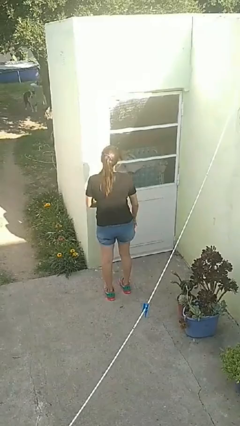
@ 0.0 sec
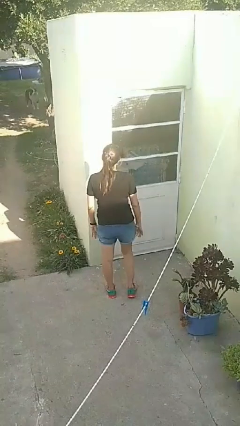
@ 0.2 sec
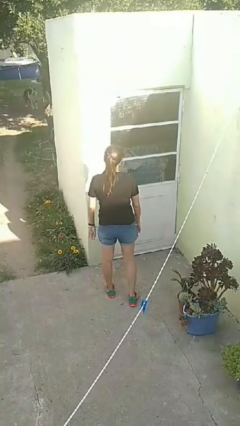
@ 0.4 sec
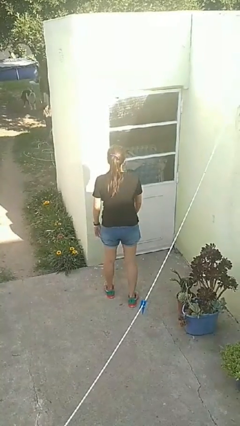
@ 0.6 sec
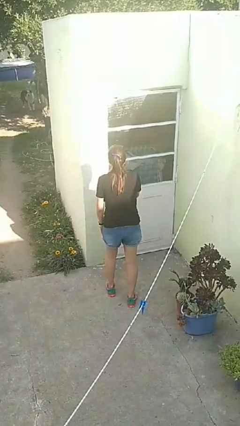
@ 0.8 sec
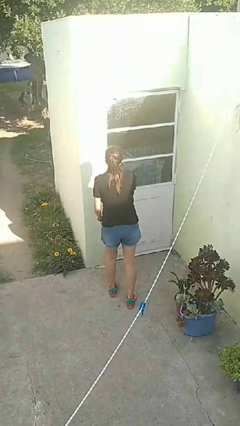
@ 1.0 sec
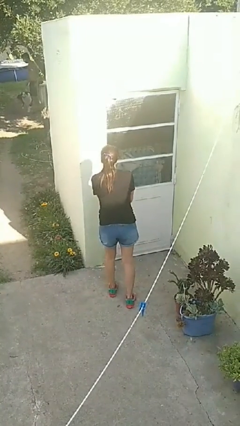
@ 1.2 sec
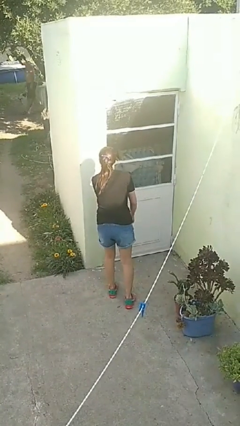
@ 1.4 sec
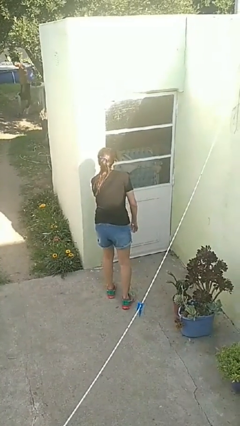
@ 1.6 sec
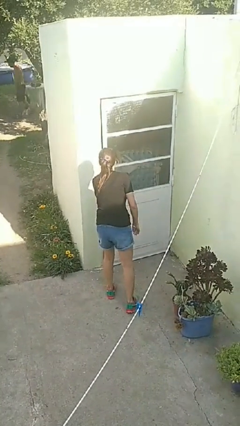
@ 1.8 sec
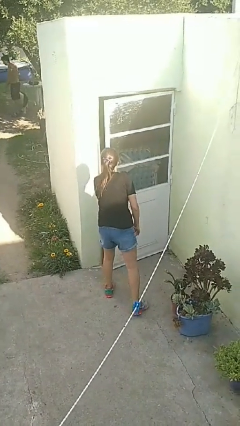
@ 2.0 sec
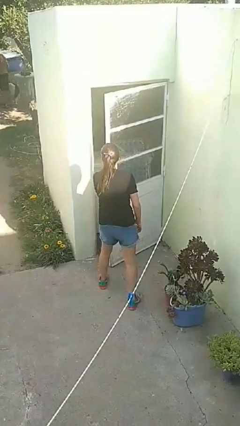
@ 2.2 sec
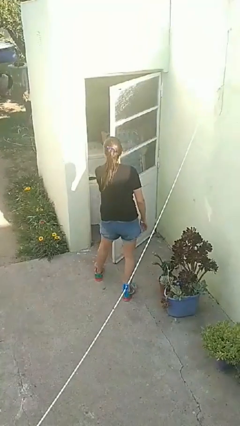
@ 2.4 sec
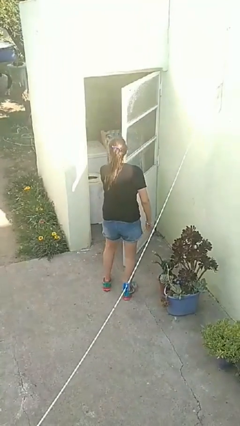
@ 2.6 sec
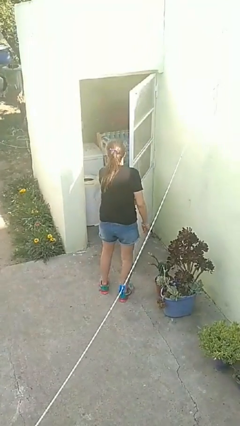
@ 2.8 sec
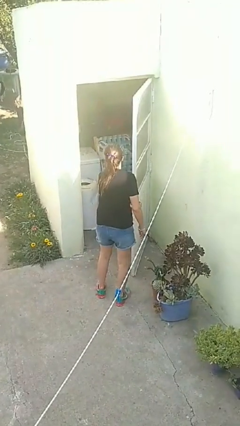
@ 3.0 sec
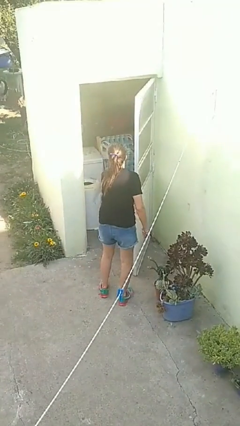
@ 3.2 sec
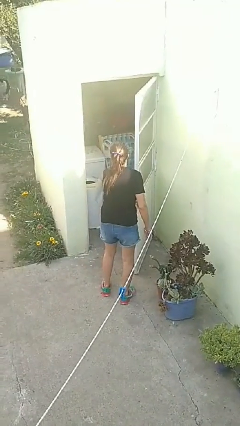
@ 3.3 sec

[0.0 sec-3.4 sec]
person opens facility door

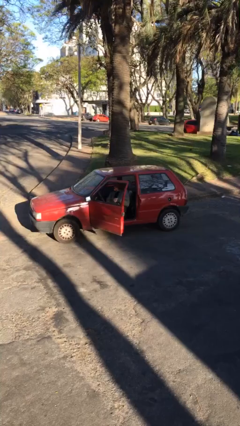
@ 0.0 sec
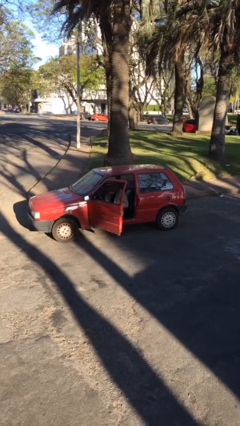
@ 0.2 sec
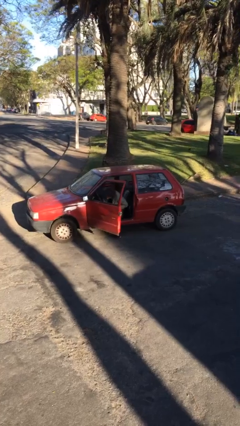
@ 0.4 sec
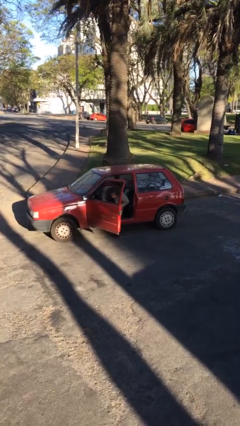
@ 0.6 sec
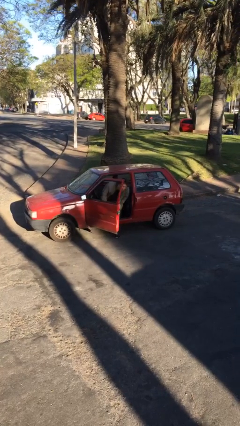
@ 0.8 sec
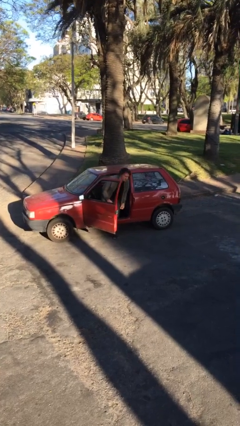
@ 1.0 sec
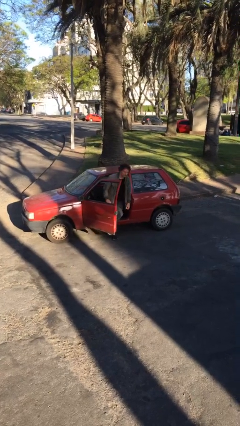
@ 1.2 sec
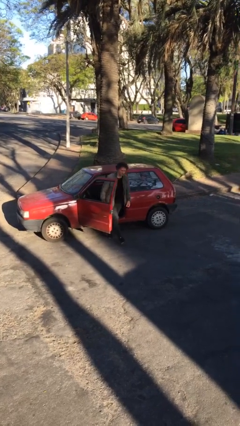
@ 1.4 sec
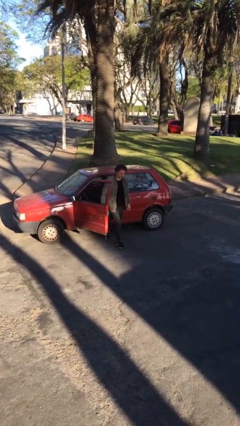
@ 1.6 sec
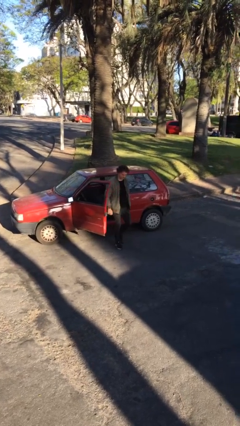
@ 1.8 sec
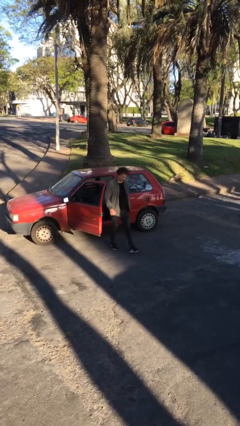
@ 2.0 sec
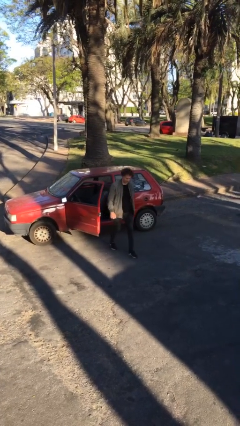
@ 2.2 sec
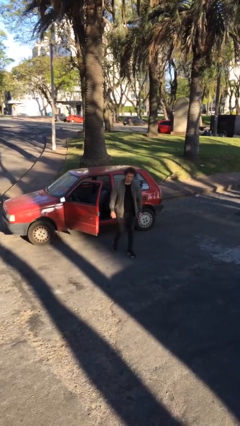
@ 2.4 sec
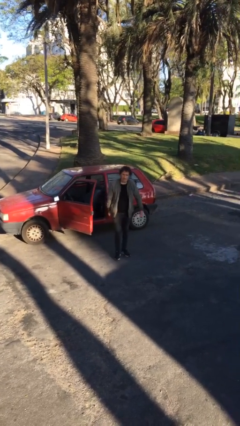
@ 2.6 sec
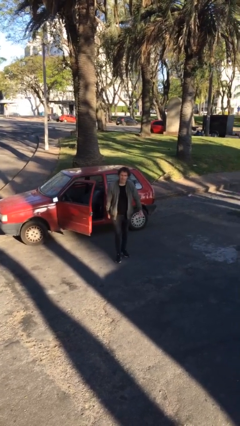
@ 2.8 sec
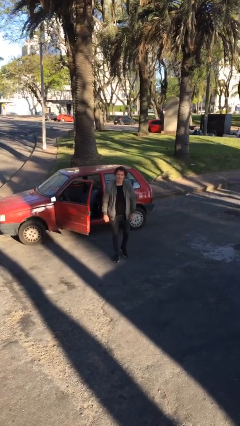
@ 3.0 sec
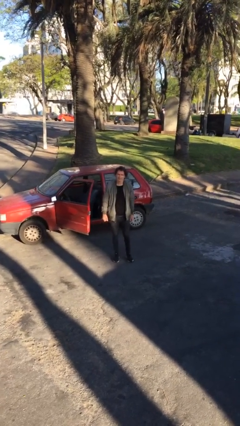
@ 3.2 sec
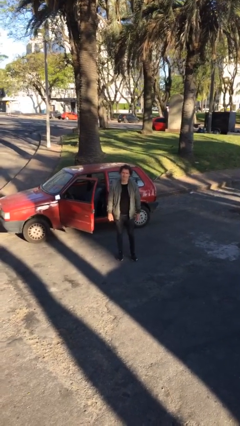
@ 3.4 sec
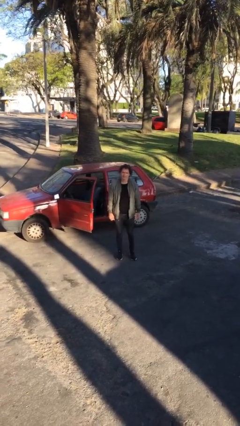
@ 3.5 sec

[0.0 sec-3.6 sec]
person exits car

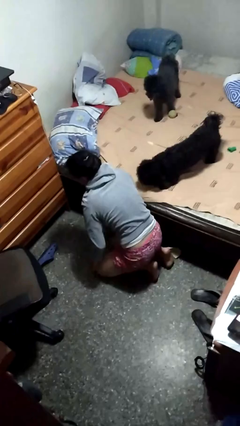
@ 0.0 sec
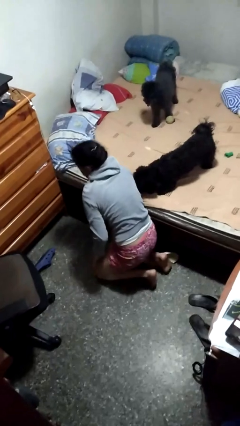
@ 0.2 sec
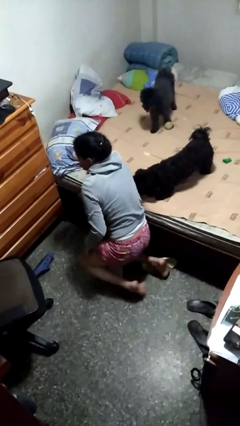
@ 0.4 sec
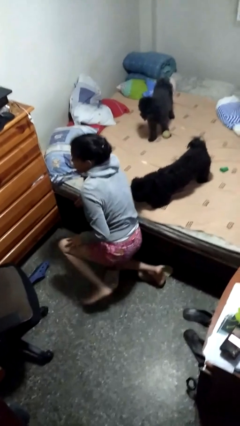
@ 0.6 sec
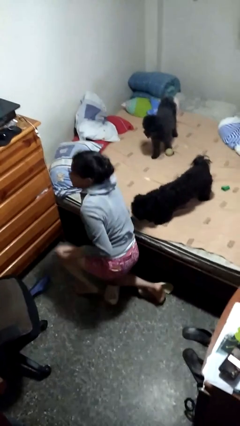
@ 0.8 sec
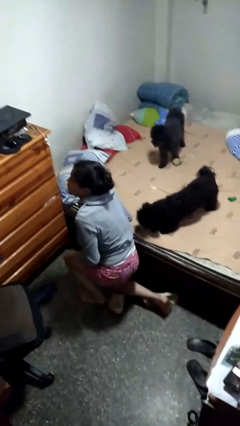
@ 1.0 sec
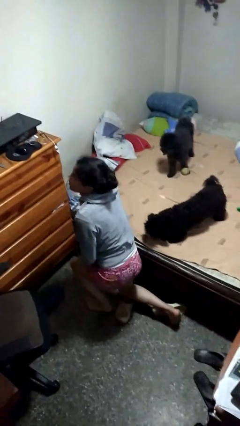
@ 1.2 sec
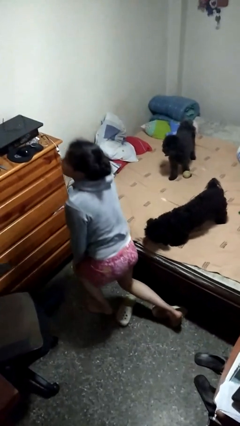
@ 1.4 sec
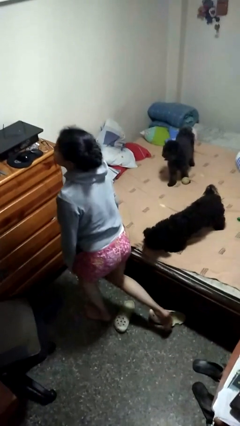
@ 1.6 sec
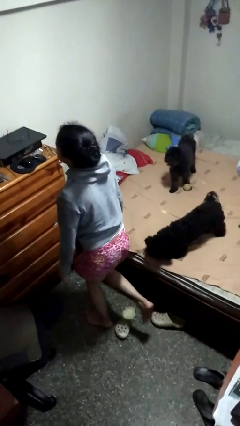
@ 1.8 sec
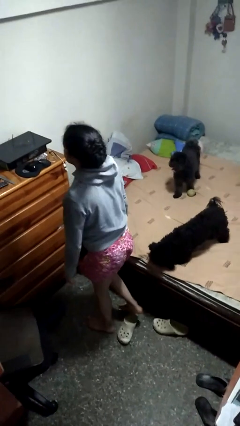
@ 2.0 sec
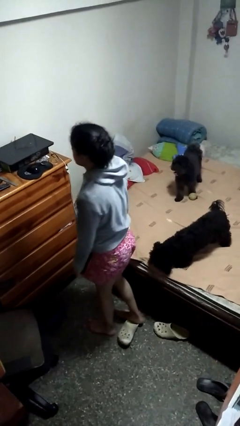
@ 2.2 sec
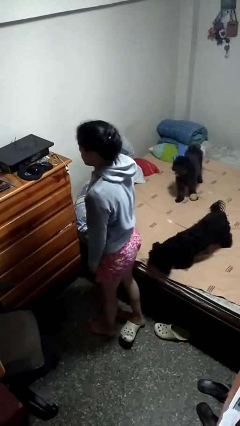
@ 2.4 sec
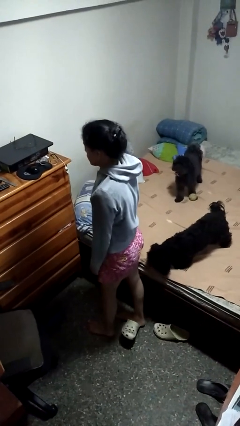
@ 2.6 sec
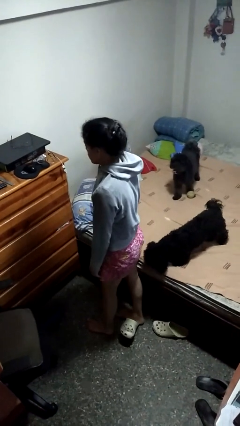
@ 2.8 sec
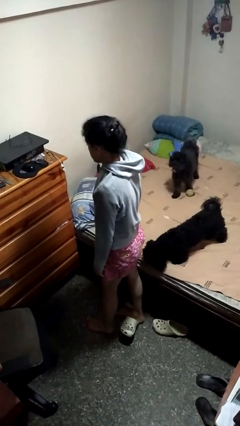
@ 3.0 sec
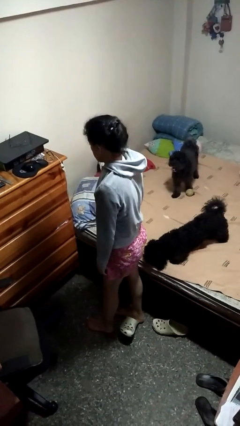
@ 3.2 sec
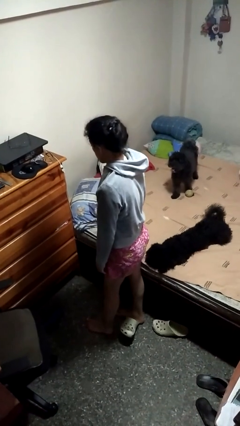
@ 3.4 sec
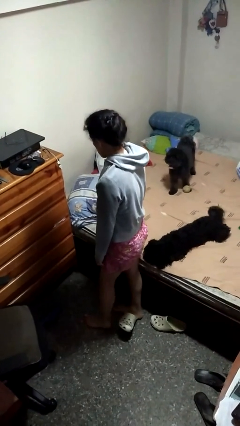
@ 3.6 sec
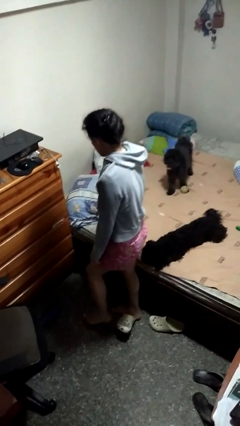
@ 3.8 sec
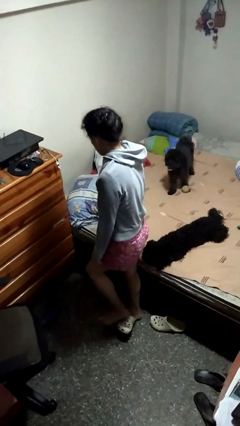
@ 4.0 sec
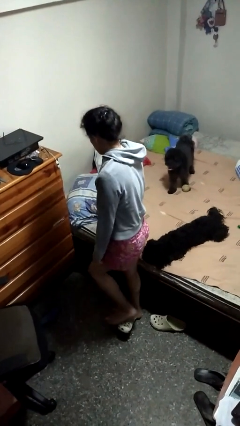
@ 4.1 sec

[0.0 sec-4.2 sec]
person stands up from floor
